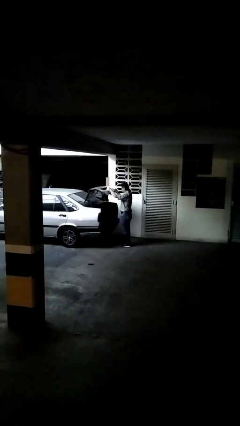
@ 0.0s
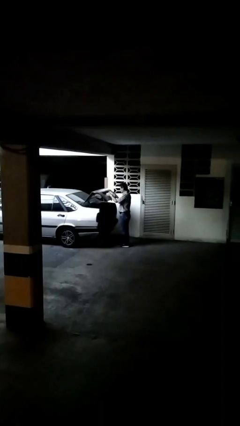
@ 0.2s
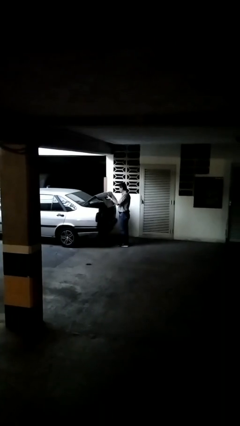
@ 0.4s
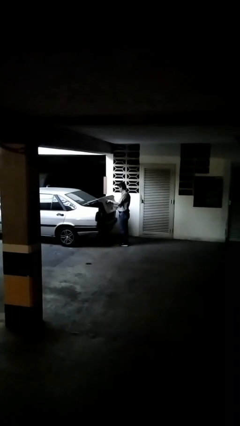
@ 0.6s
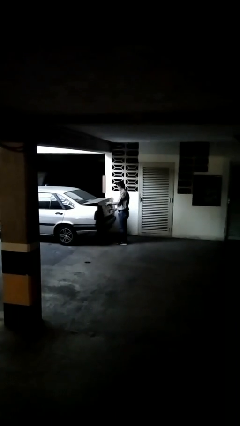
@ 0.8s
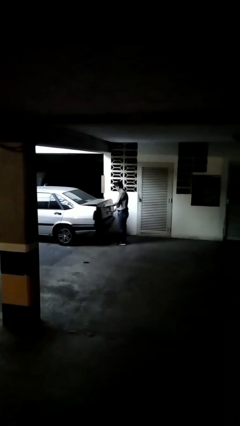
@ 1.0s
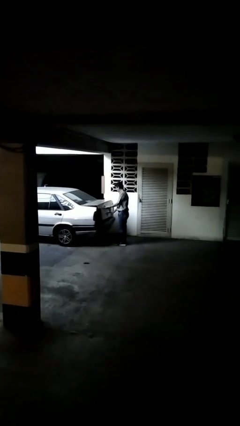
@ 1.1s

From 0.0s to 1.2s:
person closes car trunk

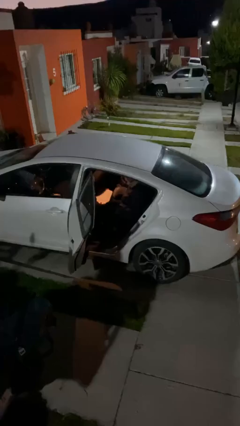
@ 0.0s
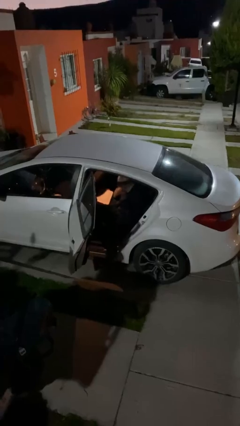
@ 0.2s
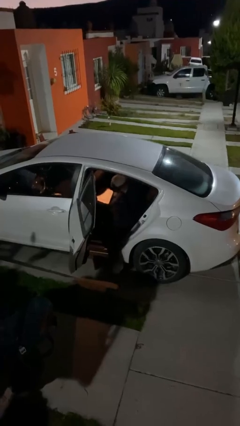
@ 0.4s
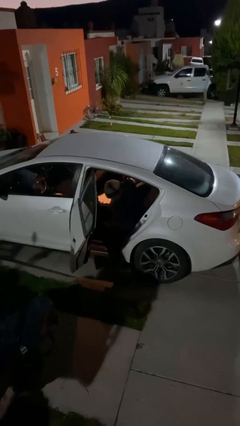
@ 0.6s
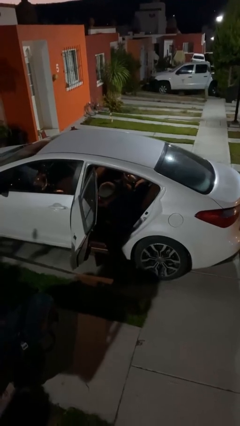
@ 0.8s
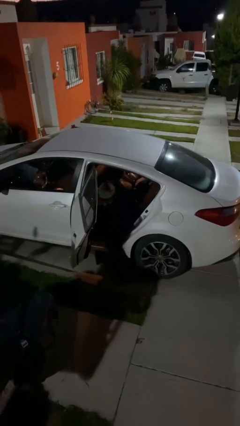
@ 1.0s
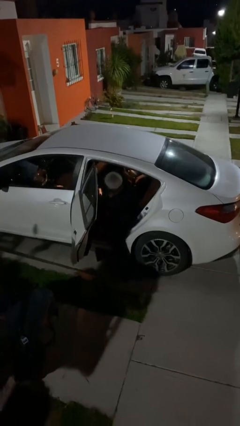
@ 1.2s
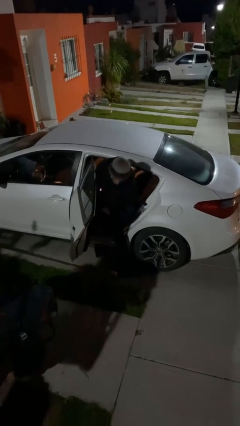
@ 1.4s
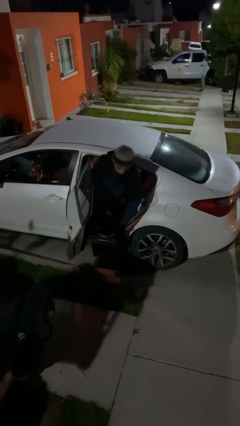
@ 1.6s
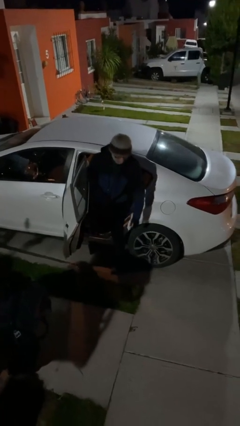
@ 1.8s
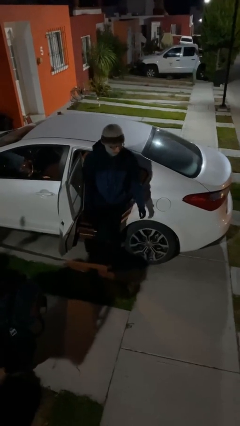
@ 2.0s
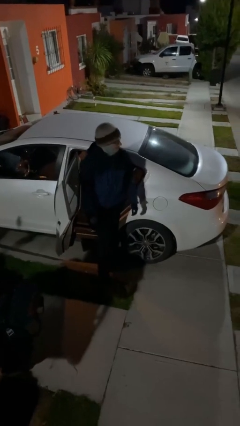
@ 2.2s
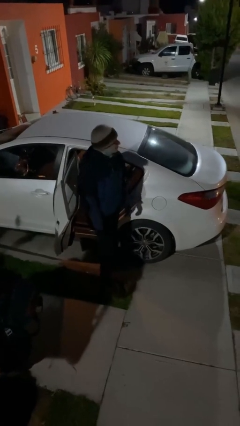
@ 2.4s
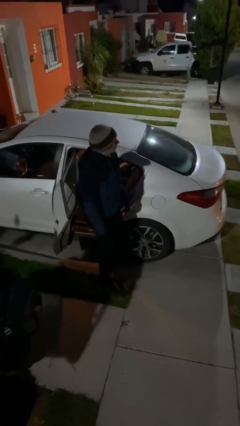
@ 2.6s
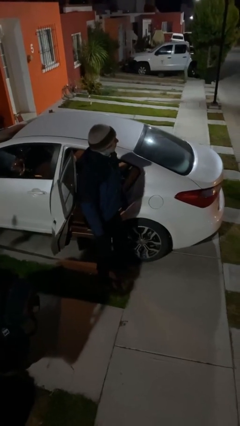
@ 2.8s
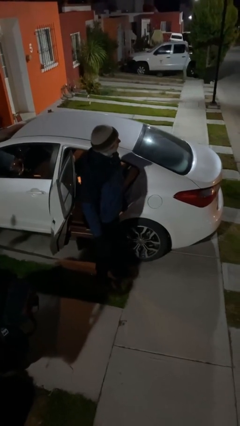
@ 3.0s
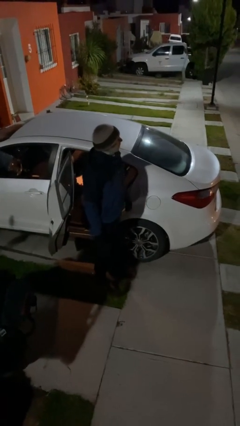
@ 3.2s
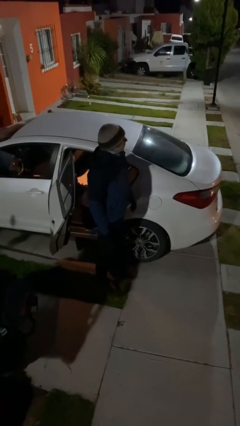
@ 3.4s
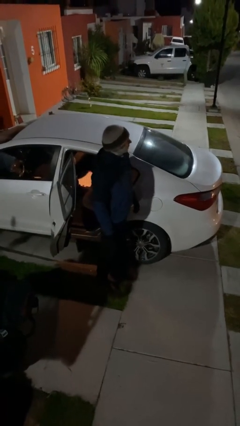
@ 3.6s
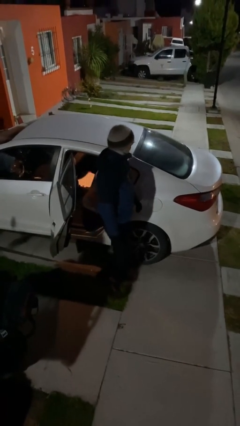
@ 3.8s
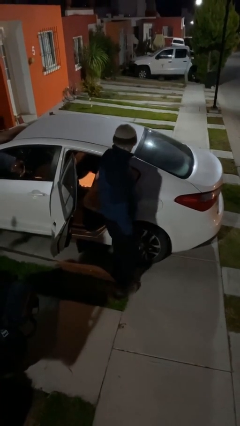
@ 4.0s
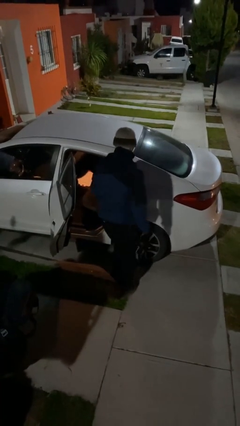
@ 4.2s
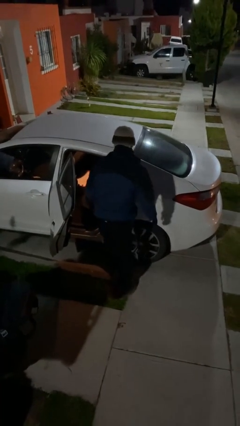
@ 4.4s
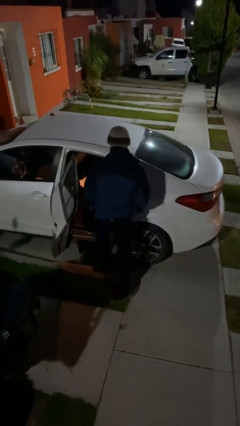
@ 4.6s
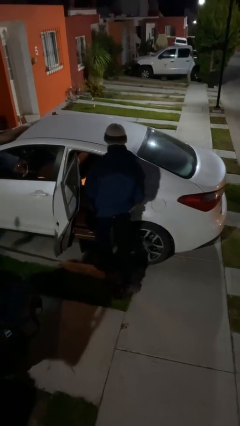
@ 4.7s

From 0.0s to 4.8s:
person exits car

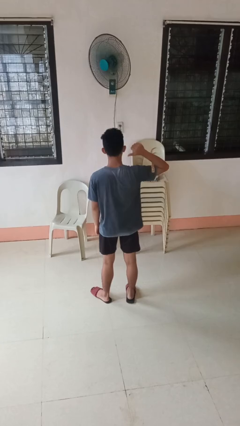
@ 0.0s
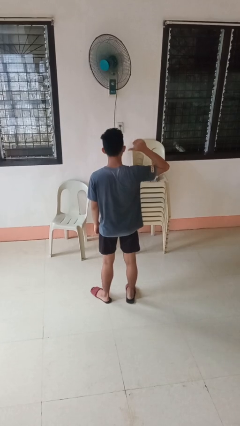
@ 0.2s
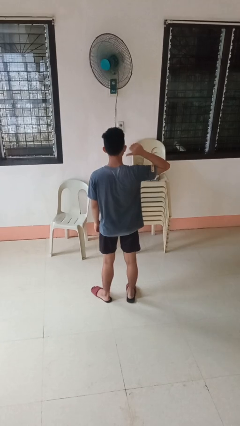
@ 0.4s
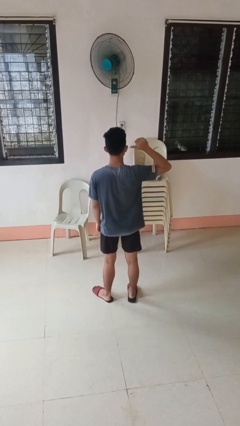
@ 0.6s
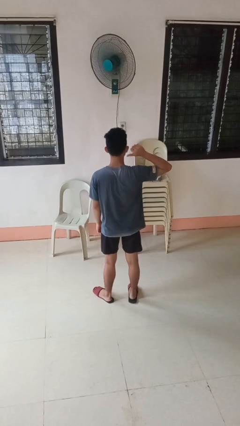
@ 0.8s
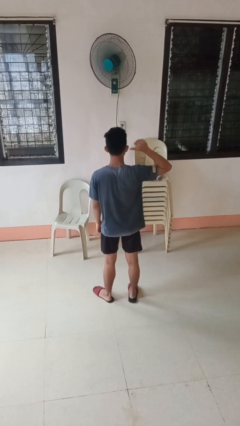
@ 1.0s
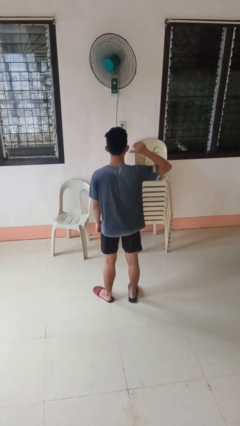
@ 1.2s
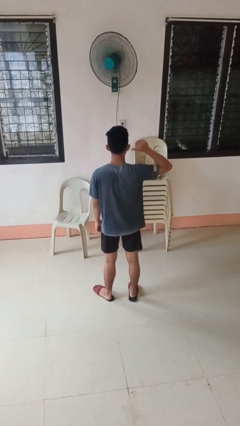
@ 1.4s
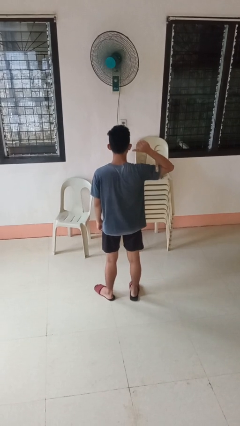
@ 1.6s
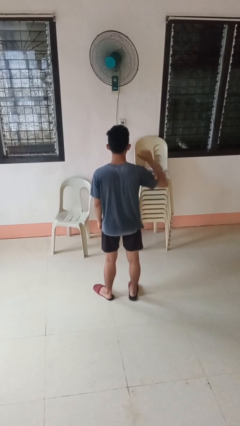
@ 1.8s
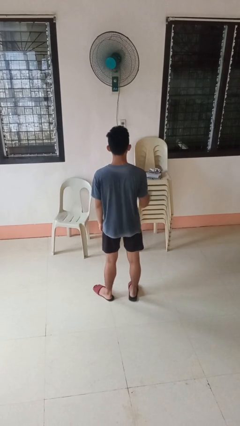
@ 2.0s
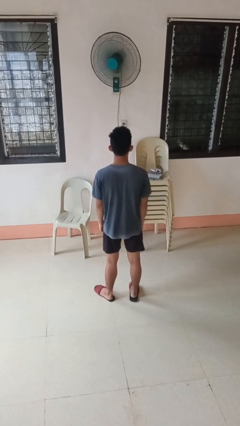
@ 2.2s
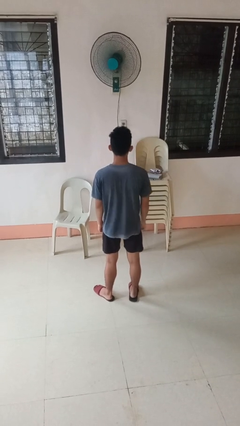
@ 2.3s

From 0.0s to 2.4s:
person gestures behind me

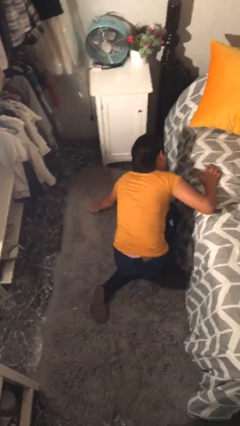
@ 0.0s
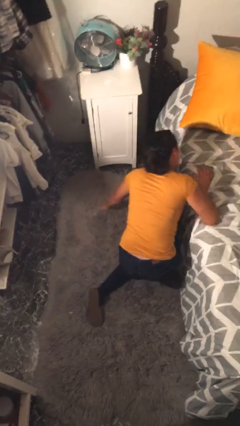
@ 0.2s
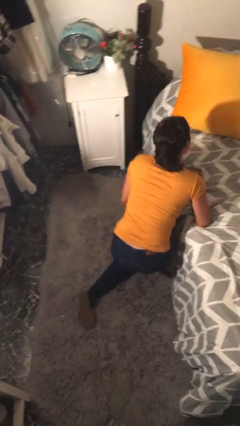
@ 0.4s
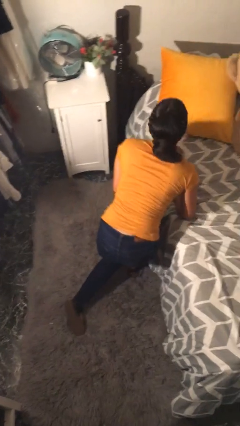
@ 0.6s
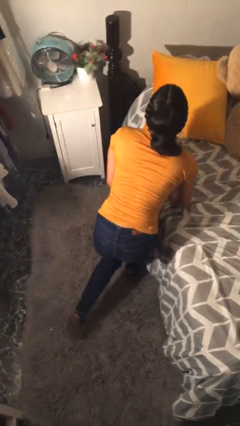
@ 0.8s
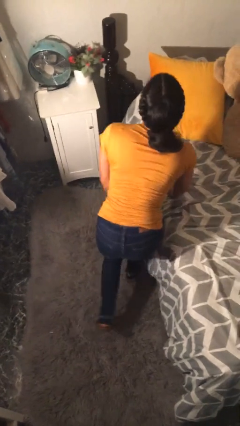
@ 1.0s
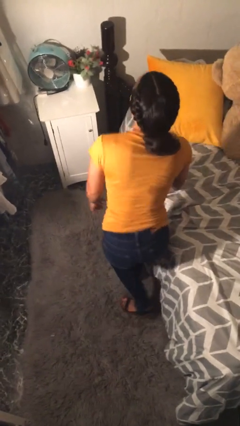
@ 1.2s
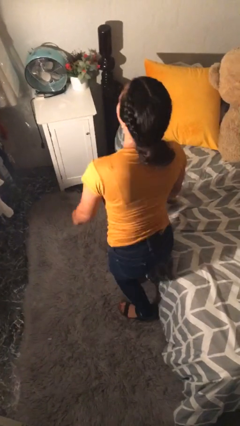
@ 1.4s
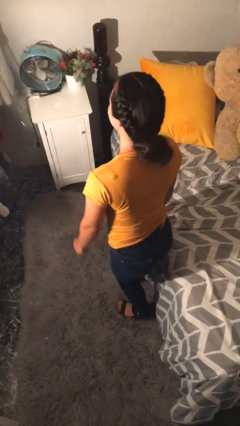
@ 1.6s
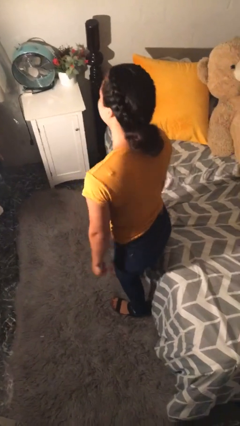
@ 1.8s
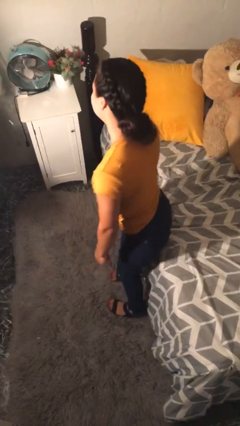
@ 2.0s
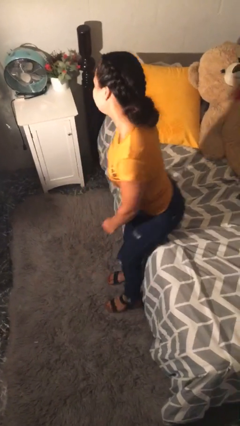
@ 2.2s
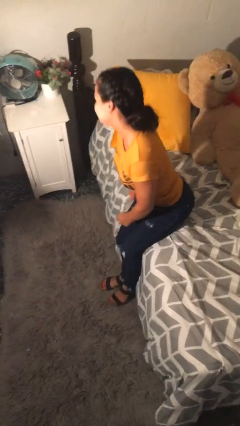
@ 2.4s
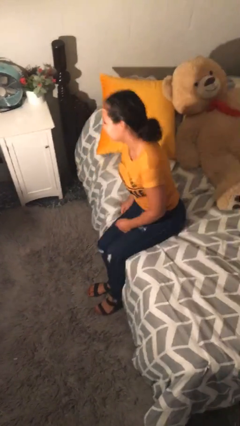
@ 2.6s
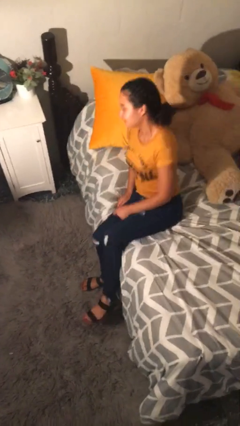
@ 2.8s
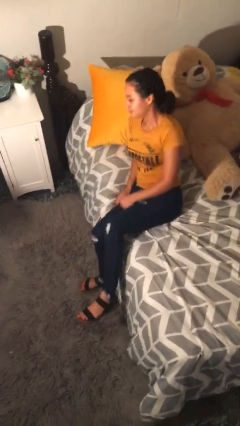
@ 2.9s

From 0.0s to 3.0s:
person stands up from floor

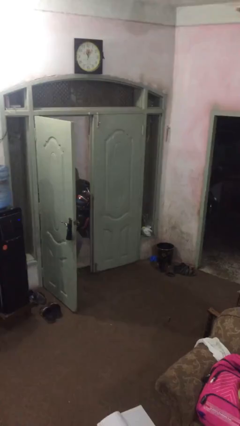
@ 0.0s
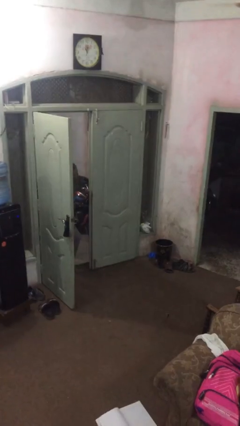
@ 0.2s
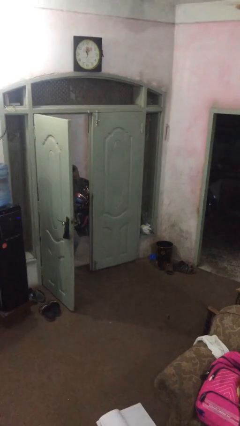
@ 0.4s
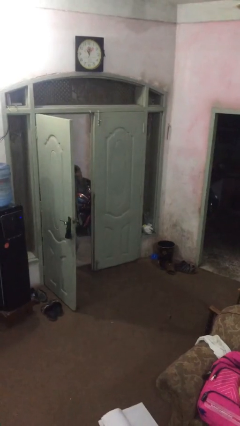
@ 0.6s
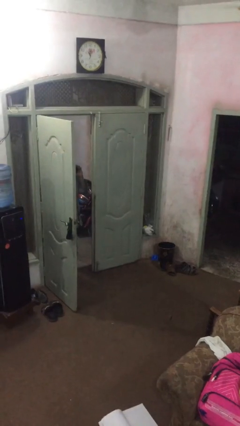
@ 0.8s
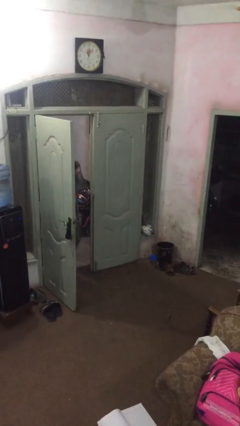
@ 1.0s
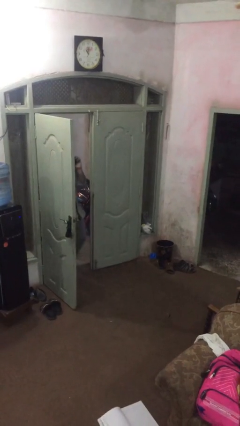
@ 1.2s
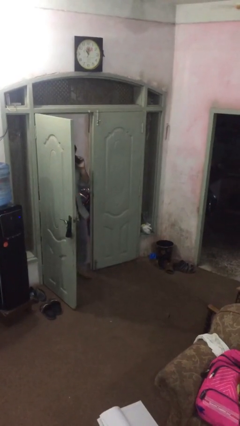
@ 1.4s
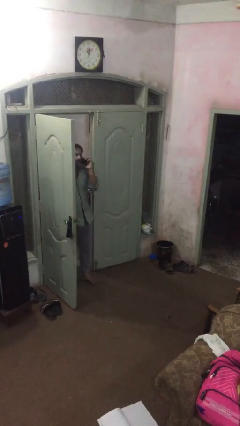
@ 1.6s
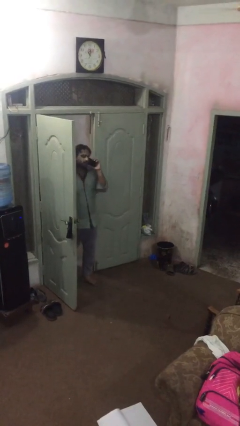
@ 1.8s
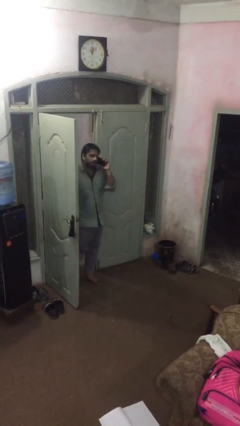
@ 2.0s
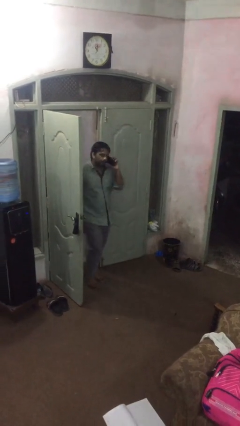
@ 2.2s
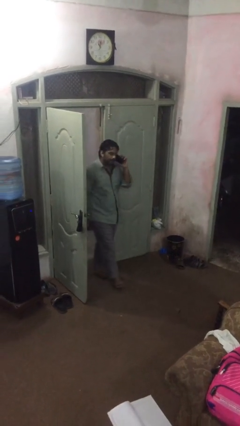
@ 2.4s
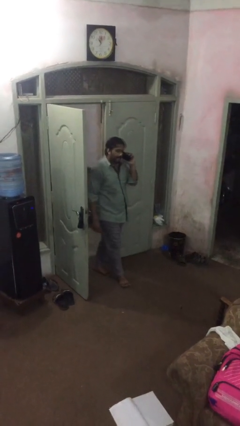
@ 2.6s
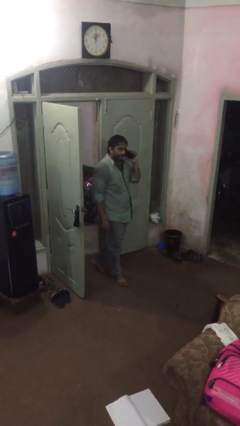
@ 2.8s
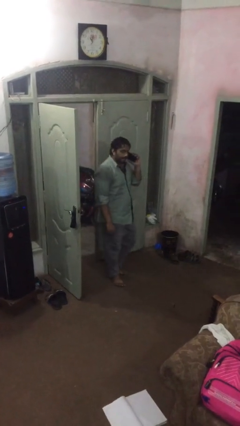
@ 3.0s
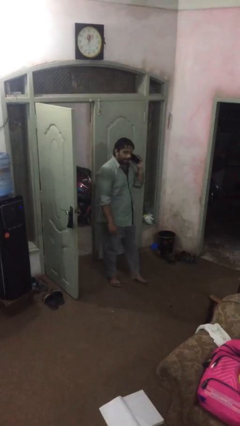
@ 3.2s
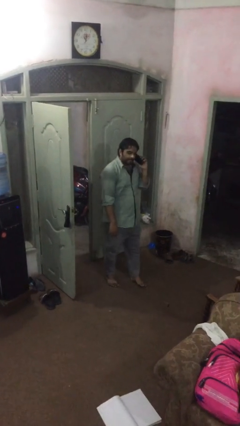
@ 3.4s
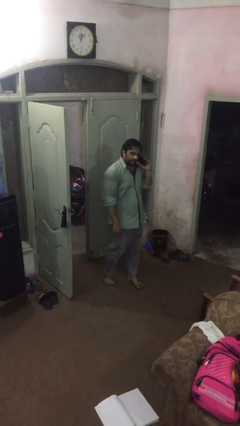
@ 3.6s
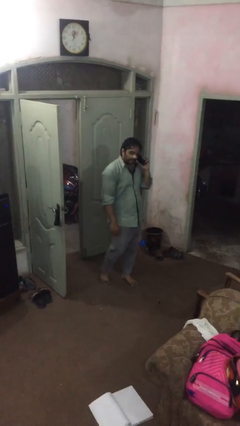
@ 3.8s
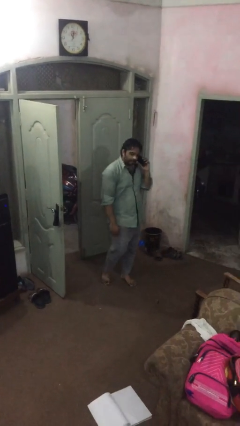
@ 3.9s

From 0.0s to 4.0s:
person enters scene through structure

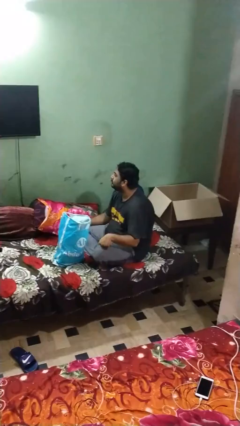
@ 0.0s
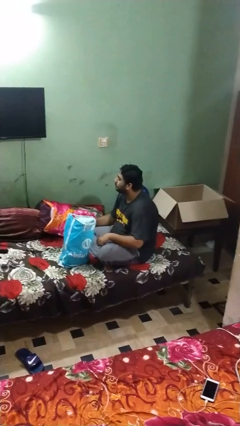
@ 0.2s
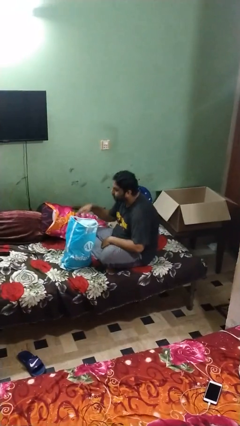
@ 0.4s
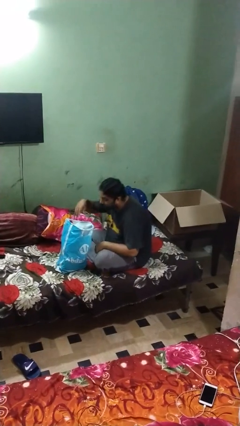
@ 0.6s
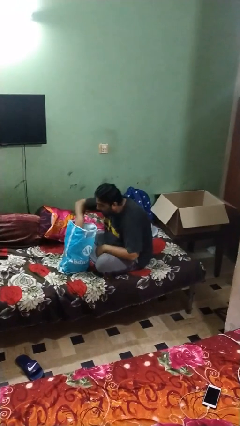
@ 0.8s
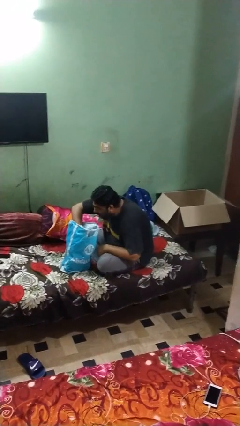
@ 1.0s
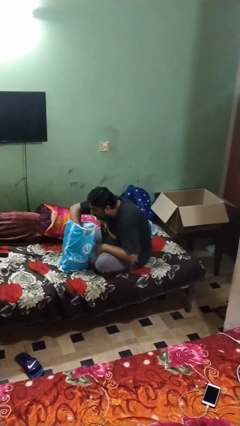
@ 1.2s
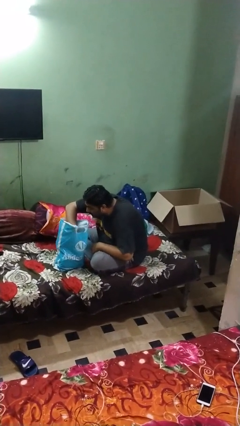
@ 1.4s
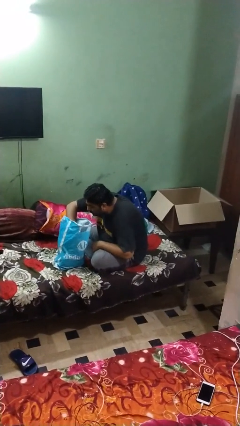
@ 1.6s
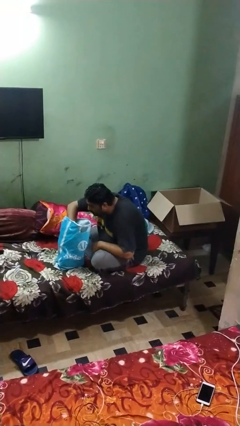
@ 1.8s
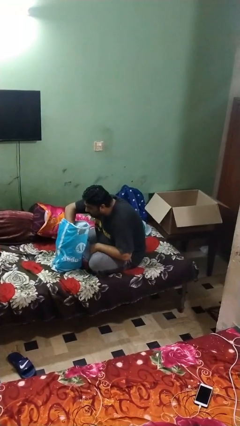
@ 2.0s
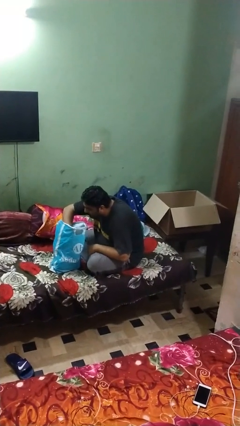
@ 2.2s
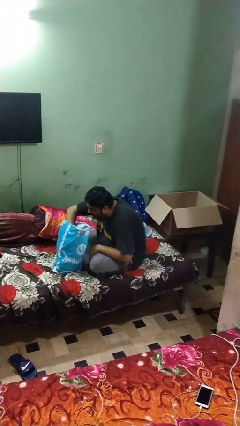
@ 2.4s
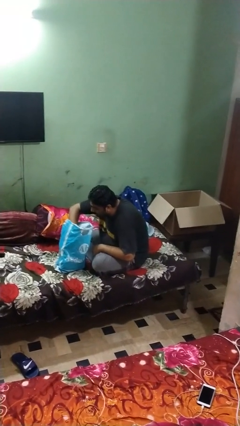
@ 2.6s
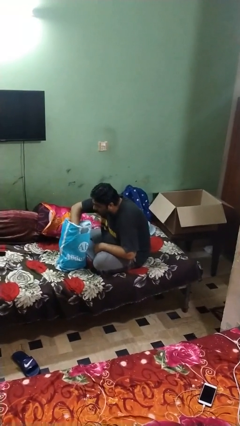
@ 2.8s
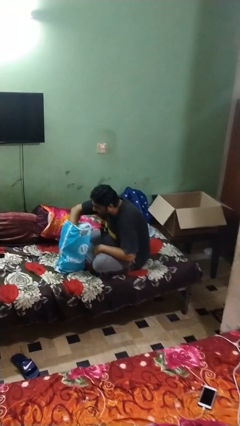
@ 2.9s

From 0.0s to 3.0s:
person searches in bag
